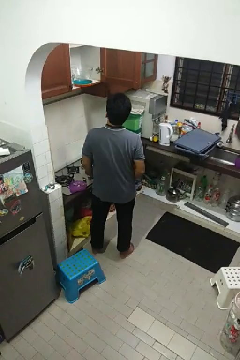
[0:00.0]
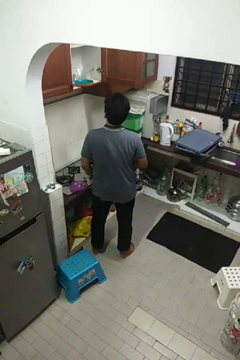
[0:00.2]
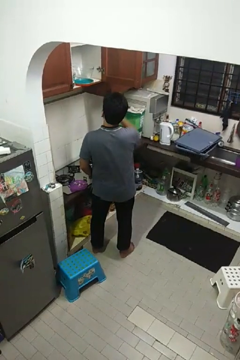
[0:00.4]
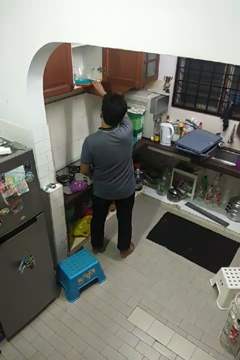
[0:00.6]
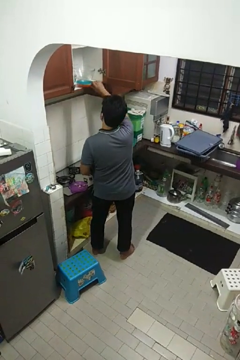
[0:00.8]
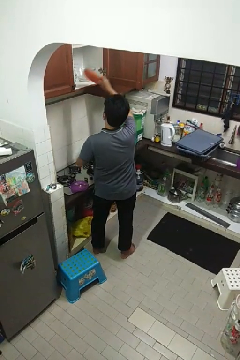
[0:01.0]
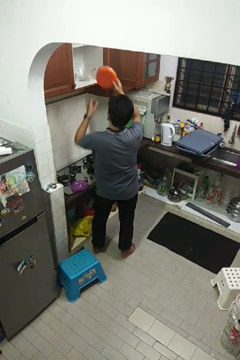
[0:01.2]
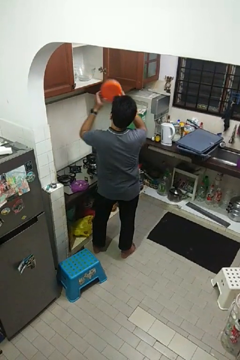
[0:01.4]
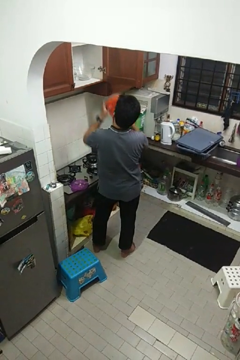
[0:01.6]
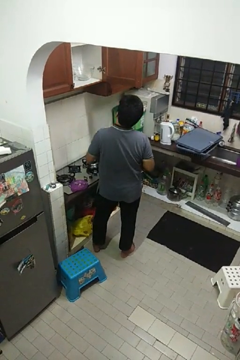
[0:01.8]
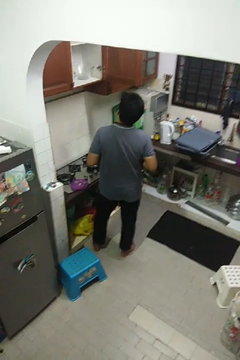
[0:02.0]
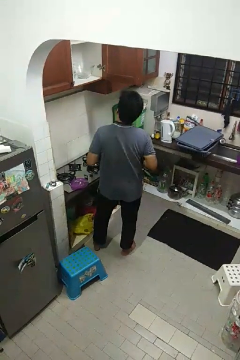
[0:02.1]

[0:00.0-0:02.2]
person takes object from cabinet

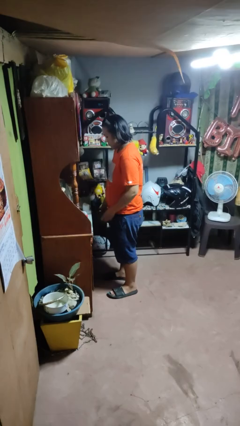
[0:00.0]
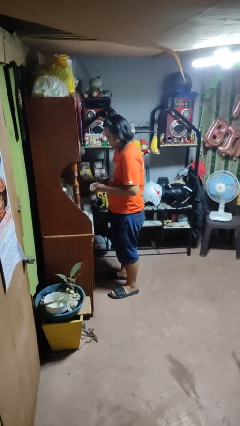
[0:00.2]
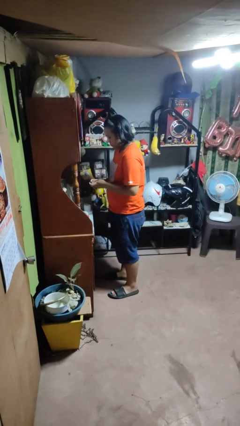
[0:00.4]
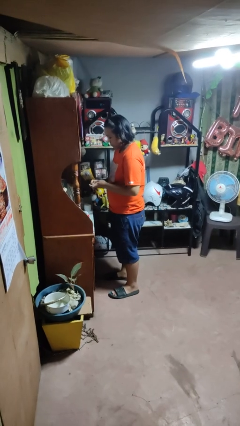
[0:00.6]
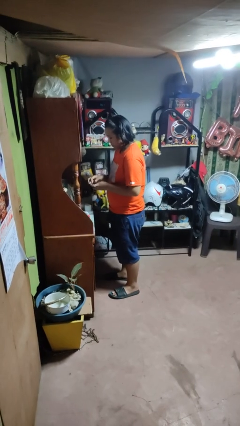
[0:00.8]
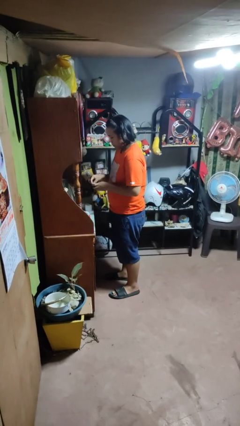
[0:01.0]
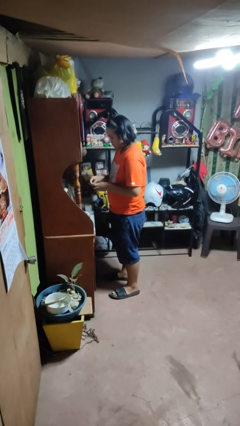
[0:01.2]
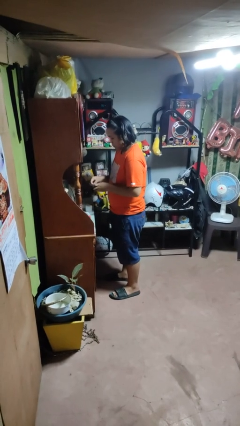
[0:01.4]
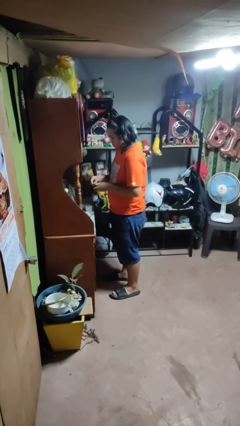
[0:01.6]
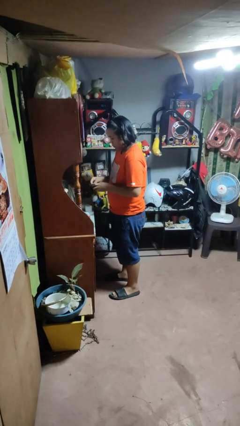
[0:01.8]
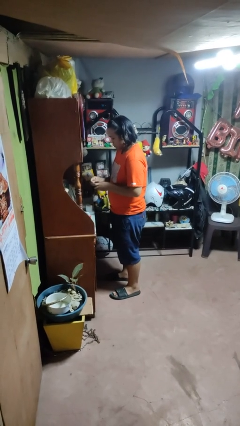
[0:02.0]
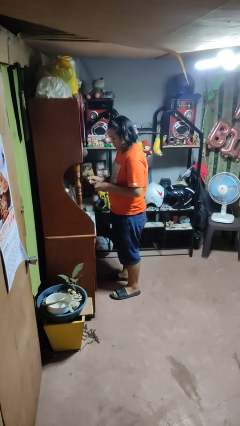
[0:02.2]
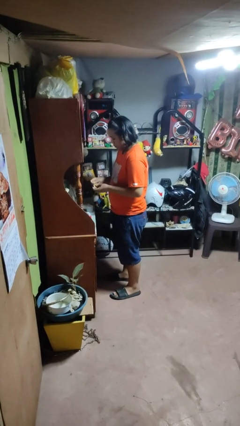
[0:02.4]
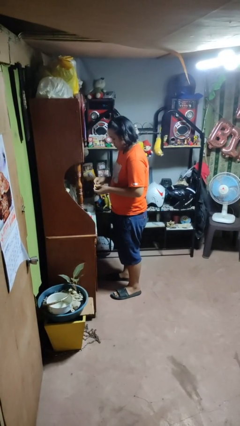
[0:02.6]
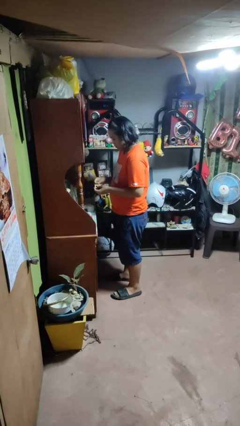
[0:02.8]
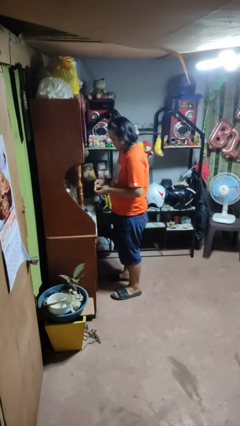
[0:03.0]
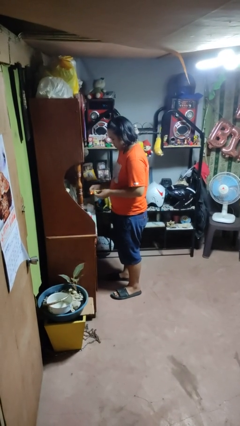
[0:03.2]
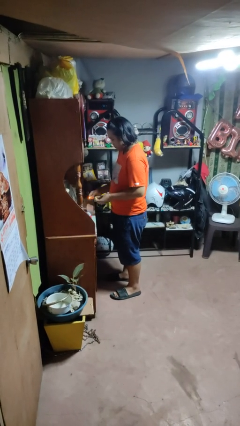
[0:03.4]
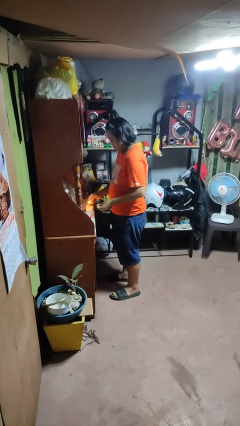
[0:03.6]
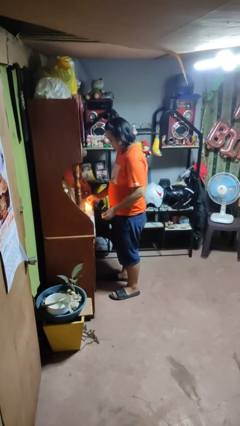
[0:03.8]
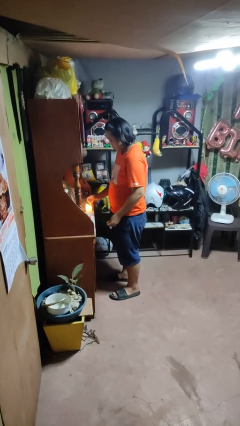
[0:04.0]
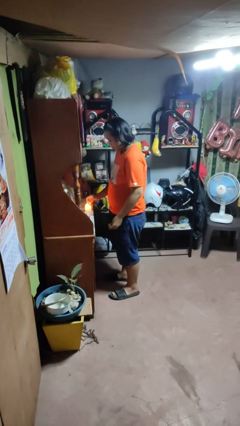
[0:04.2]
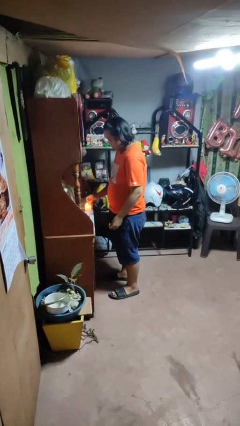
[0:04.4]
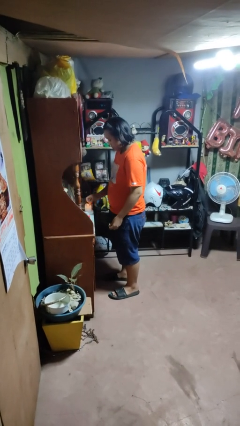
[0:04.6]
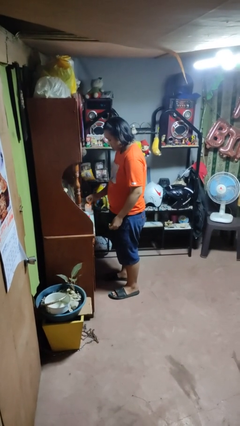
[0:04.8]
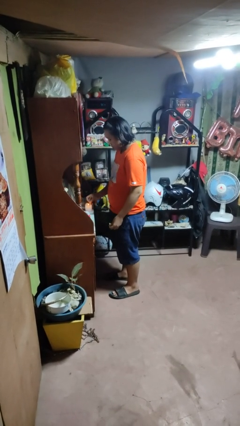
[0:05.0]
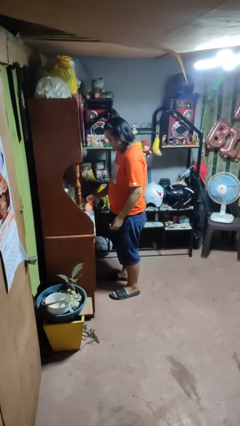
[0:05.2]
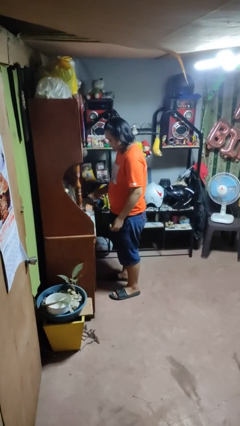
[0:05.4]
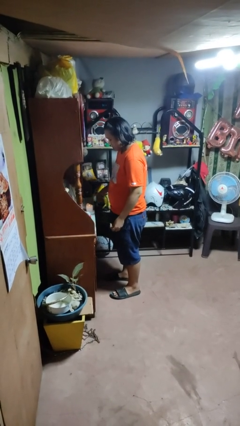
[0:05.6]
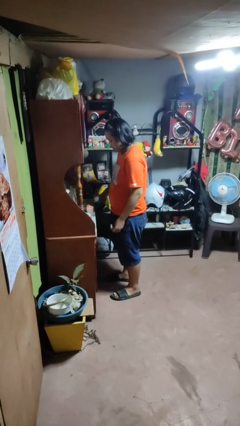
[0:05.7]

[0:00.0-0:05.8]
person lights candle

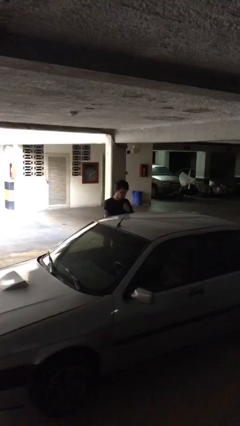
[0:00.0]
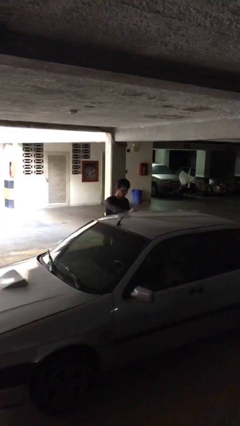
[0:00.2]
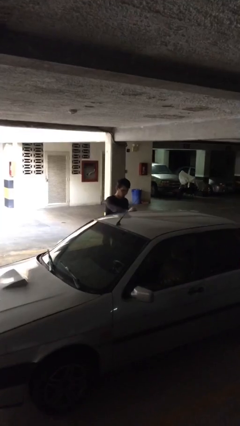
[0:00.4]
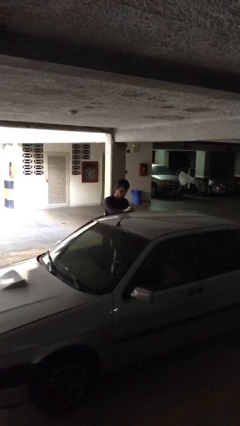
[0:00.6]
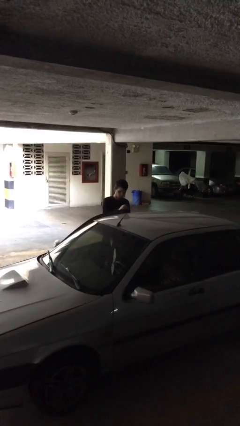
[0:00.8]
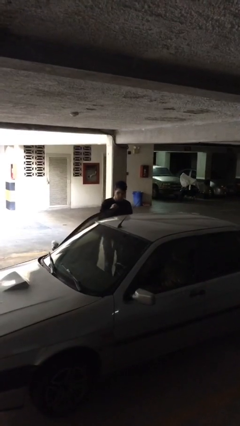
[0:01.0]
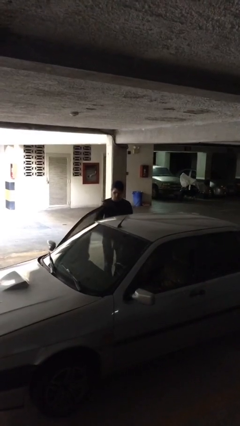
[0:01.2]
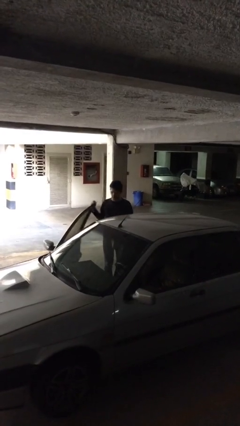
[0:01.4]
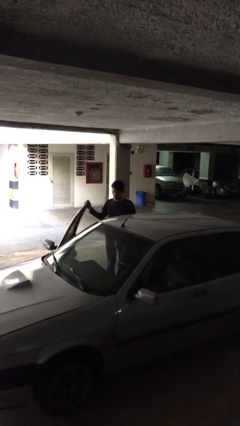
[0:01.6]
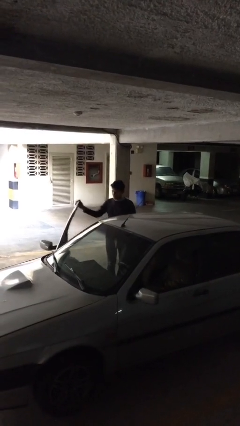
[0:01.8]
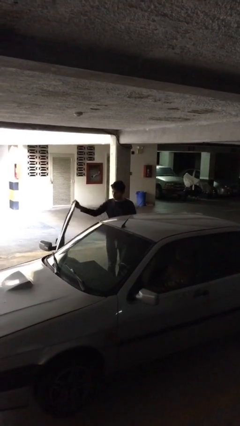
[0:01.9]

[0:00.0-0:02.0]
person opens car door

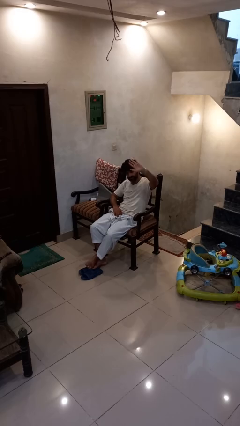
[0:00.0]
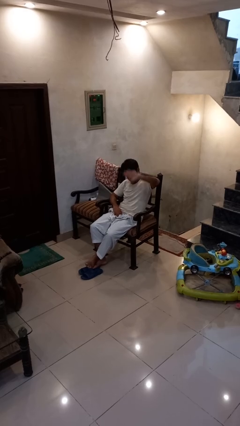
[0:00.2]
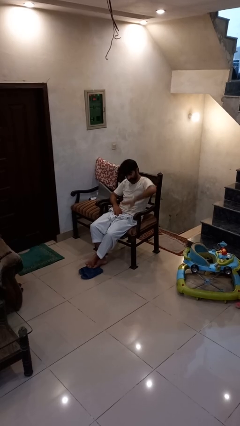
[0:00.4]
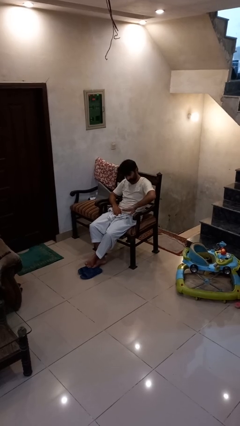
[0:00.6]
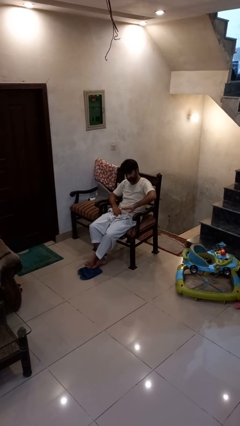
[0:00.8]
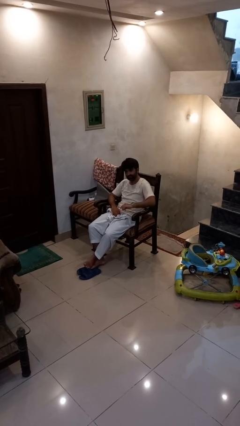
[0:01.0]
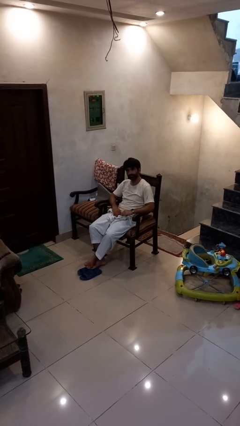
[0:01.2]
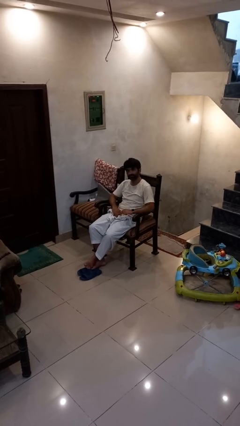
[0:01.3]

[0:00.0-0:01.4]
person gestures swipe down

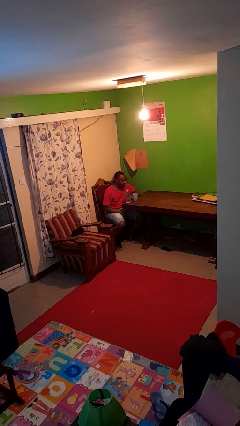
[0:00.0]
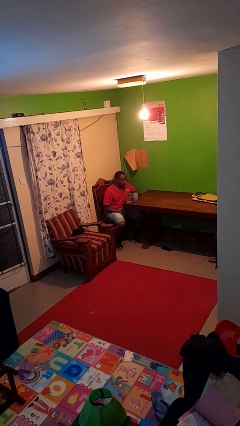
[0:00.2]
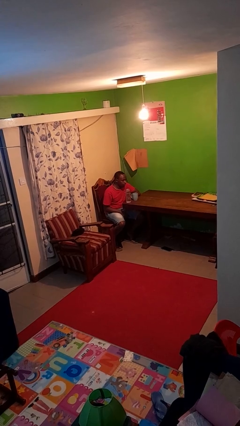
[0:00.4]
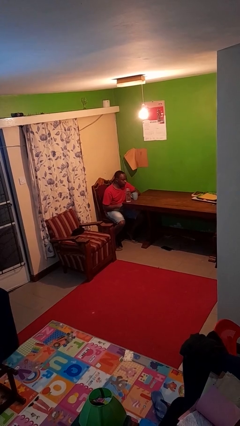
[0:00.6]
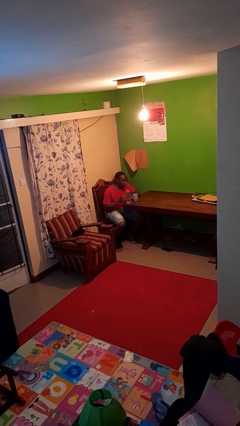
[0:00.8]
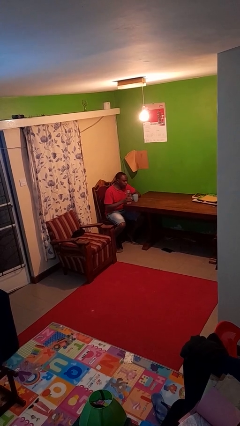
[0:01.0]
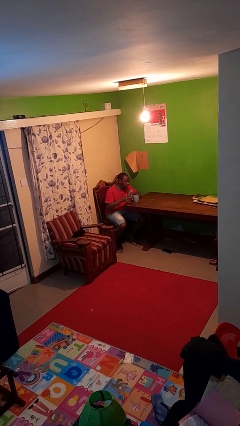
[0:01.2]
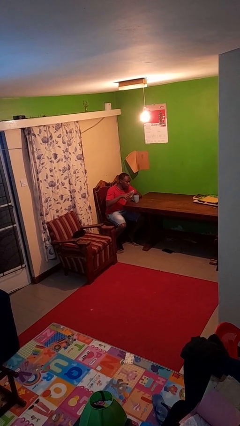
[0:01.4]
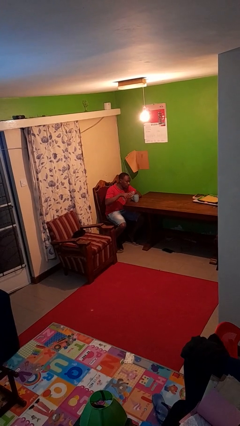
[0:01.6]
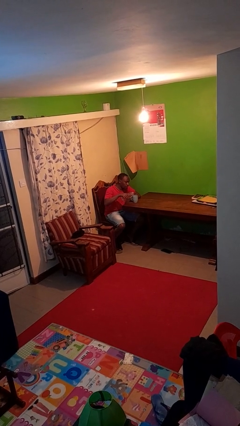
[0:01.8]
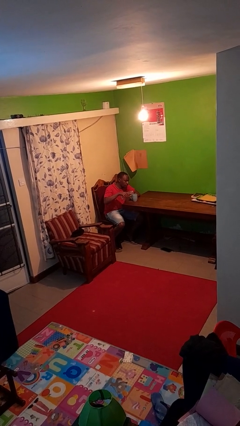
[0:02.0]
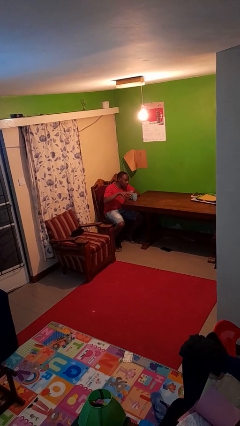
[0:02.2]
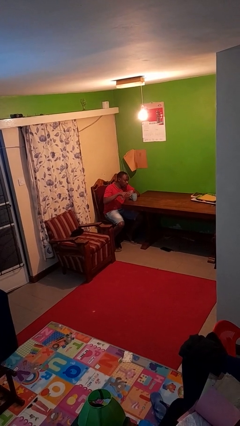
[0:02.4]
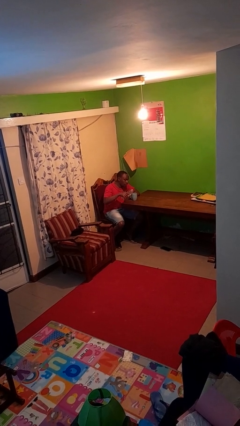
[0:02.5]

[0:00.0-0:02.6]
person pours liquid into cup

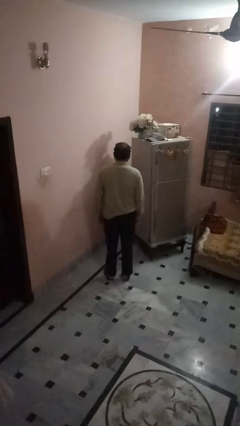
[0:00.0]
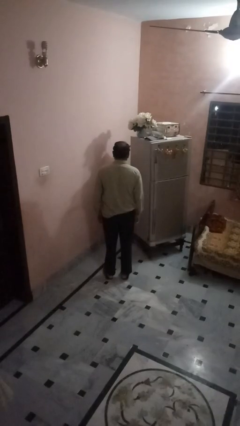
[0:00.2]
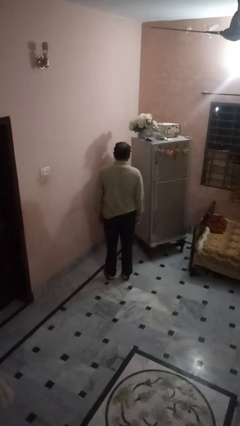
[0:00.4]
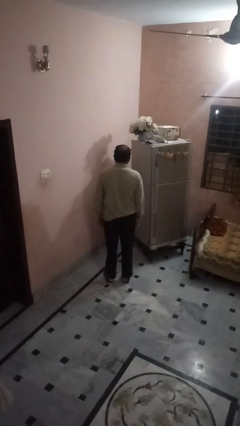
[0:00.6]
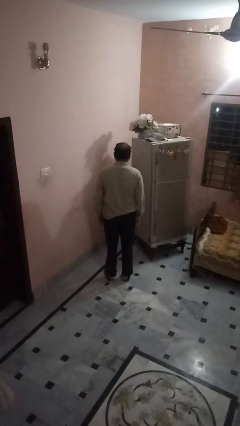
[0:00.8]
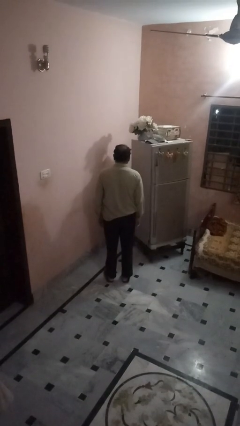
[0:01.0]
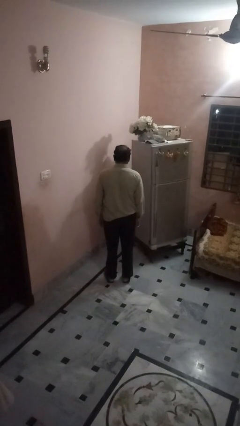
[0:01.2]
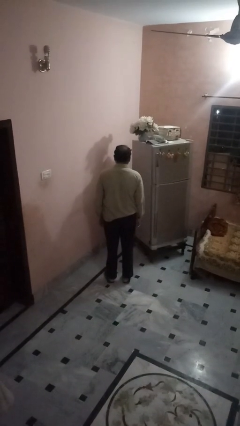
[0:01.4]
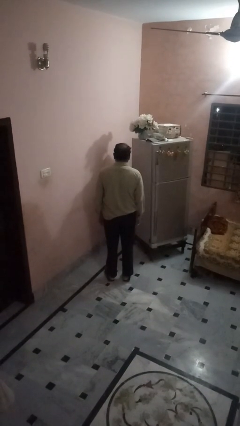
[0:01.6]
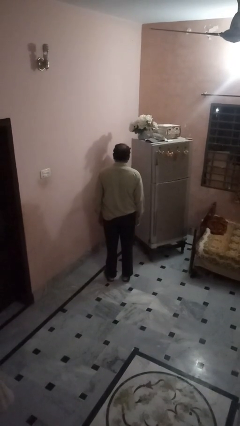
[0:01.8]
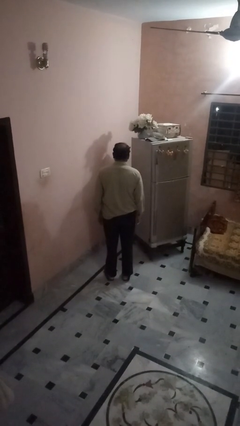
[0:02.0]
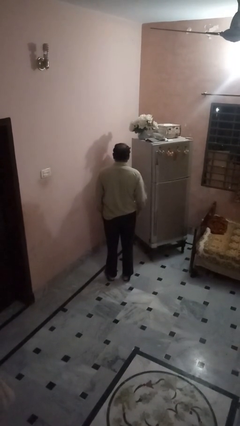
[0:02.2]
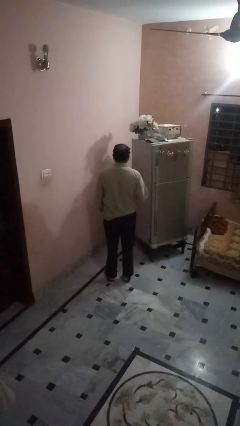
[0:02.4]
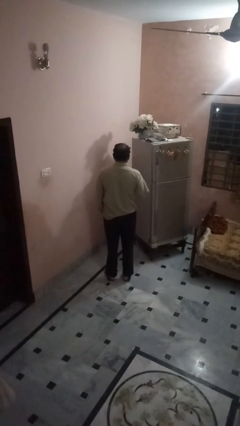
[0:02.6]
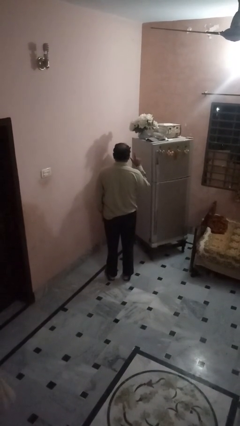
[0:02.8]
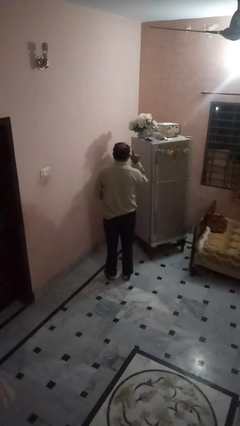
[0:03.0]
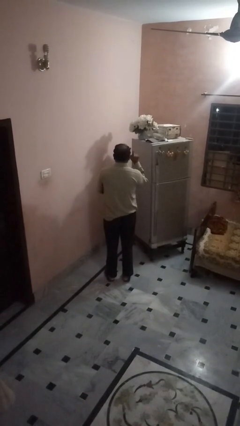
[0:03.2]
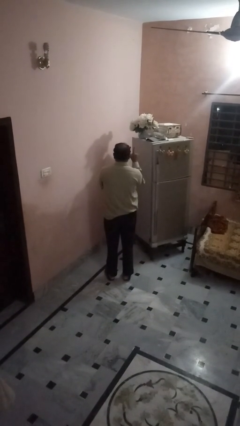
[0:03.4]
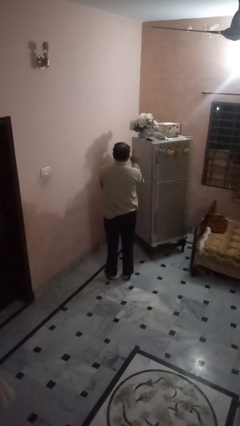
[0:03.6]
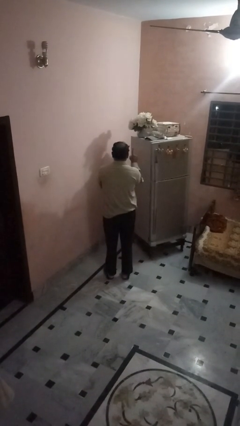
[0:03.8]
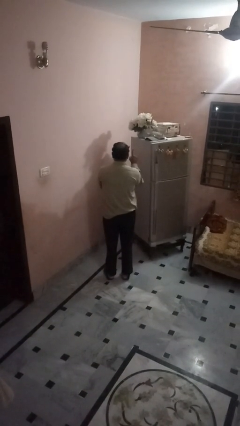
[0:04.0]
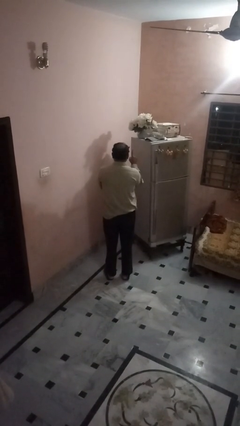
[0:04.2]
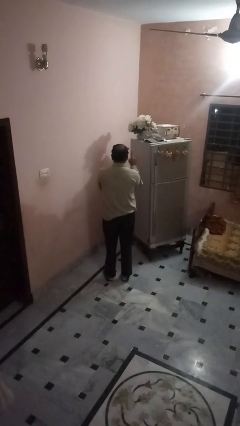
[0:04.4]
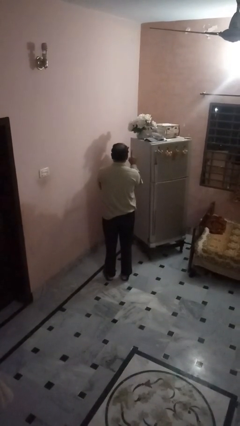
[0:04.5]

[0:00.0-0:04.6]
person gestures number one
